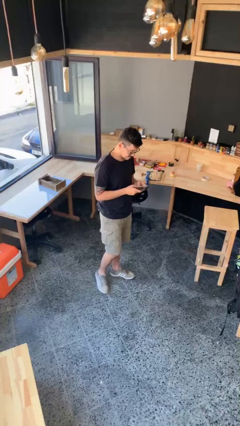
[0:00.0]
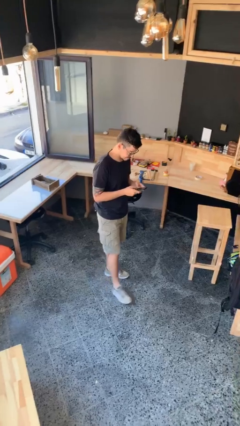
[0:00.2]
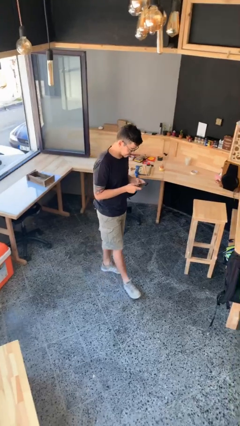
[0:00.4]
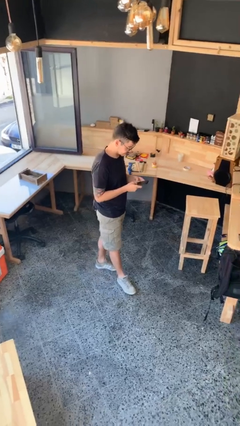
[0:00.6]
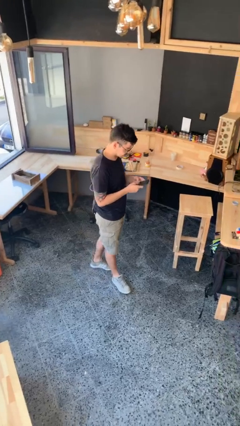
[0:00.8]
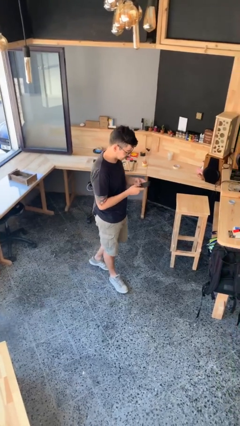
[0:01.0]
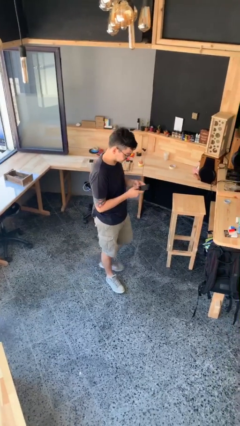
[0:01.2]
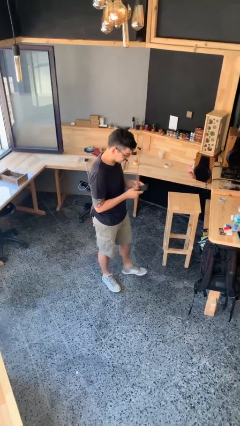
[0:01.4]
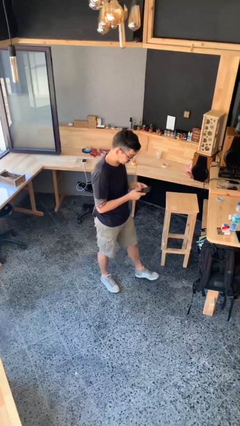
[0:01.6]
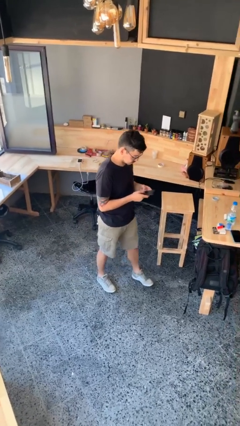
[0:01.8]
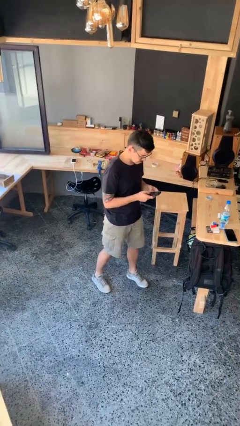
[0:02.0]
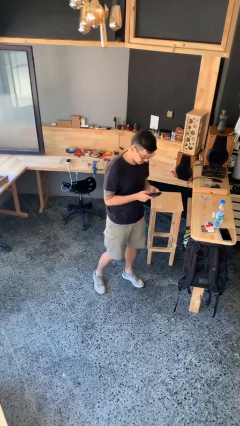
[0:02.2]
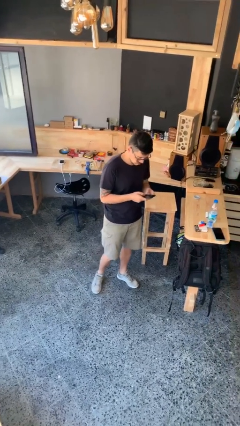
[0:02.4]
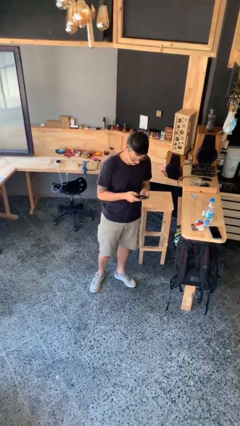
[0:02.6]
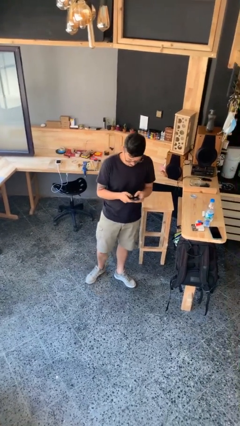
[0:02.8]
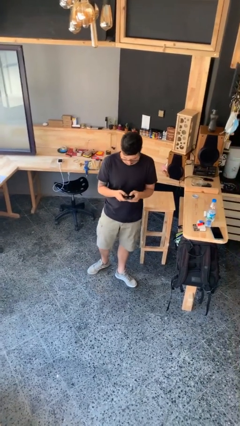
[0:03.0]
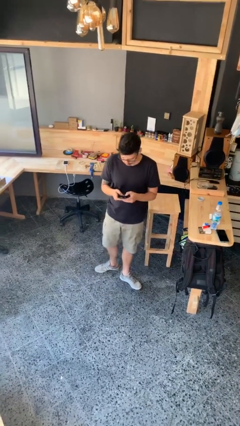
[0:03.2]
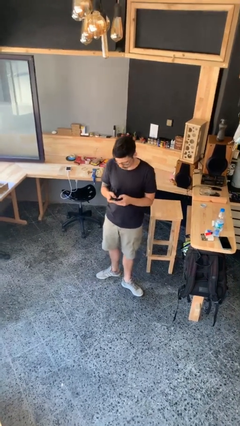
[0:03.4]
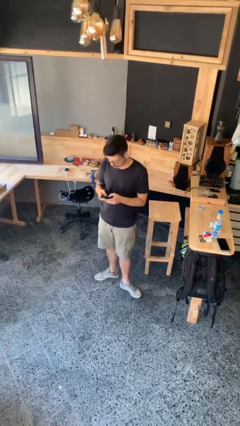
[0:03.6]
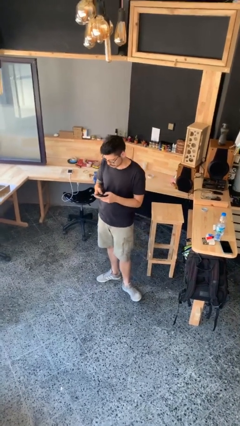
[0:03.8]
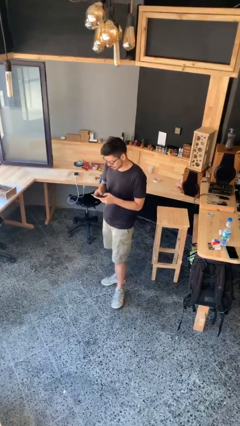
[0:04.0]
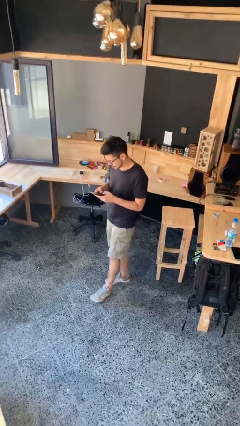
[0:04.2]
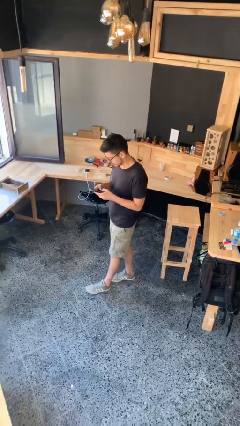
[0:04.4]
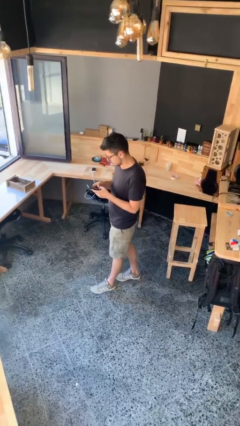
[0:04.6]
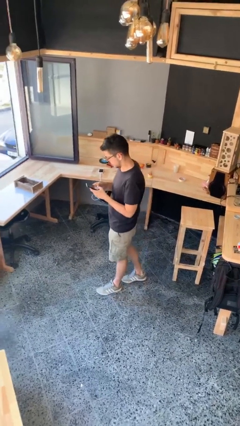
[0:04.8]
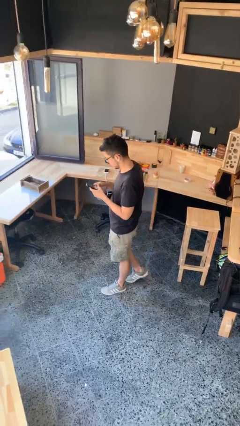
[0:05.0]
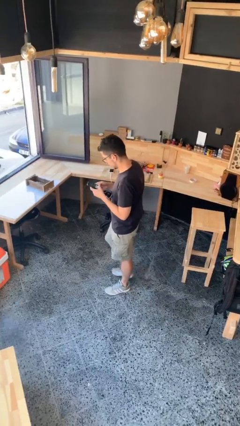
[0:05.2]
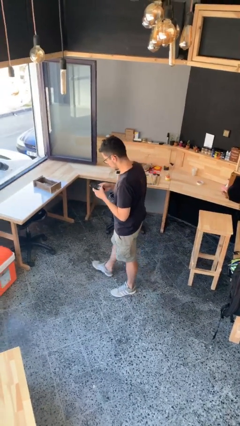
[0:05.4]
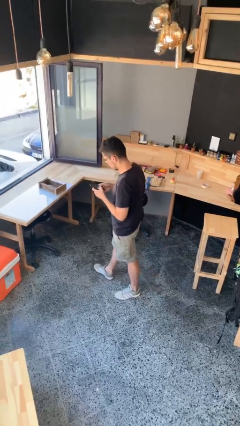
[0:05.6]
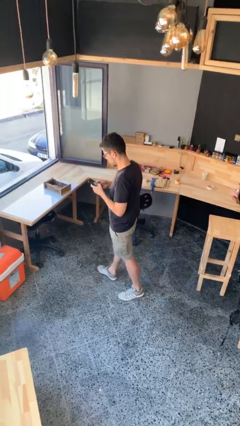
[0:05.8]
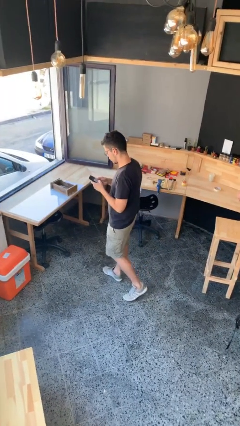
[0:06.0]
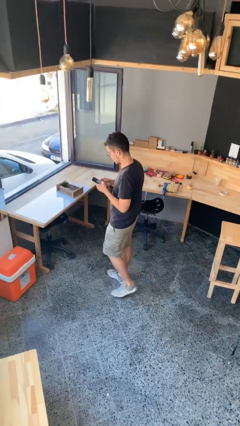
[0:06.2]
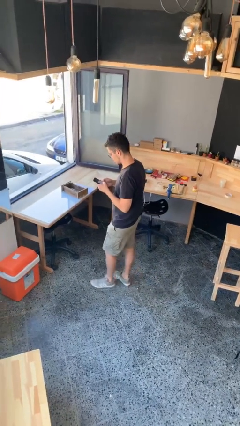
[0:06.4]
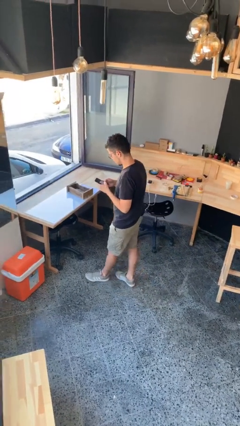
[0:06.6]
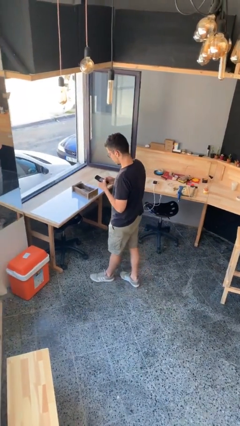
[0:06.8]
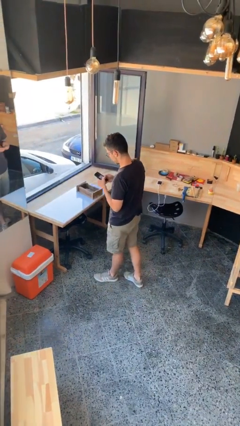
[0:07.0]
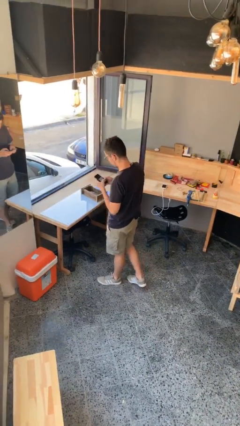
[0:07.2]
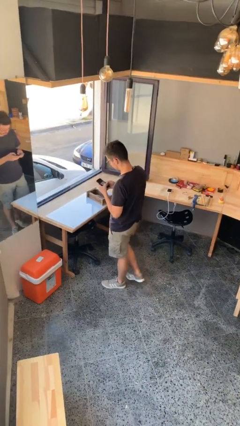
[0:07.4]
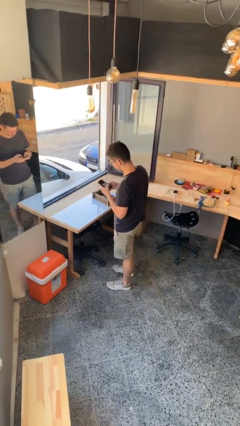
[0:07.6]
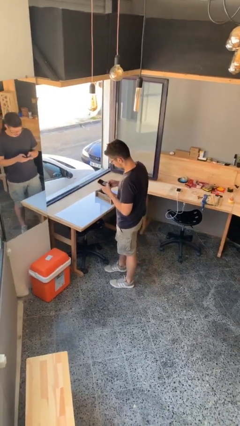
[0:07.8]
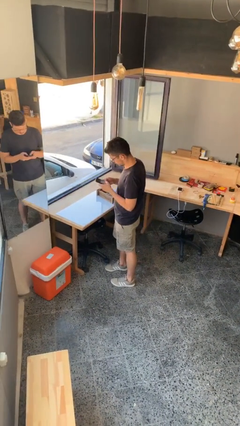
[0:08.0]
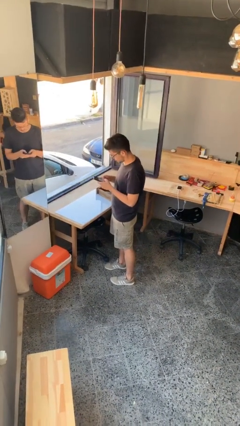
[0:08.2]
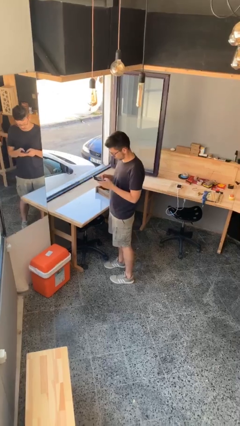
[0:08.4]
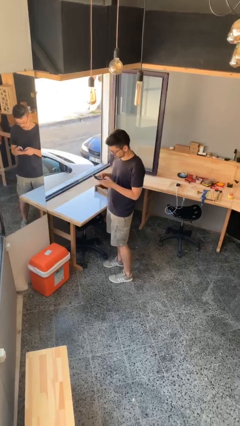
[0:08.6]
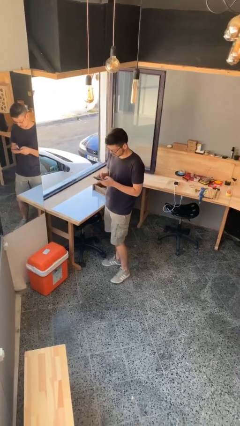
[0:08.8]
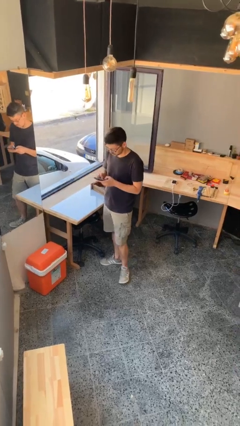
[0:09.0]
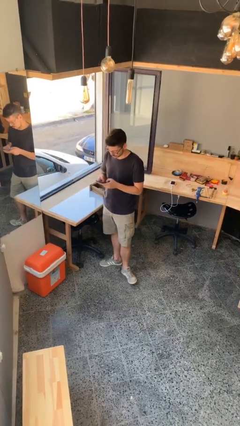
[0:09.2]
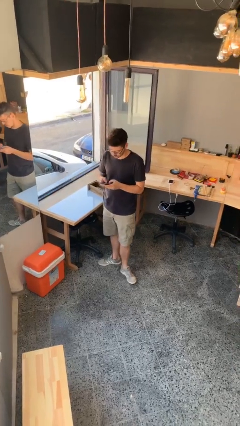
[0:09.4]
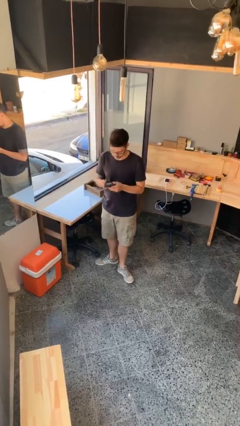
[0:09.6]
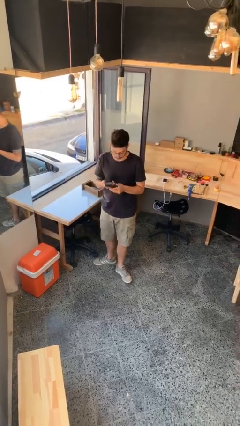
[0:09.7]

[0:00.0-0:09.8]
person texts on phone

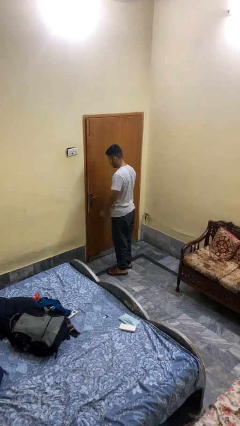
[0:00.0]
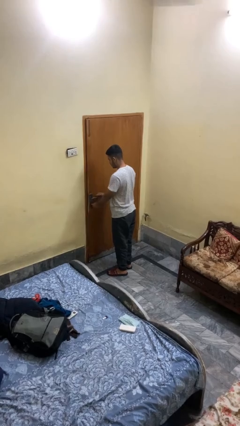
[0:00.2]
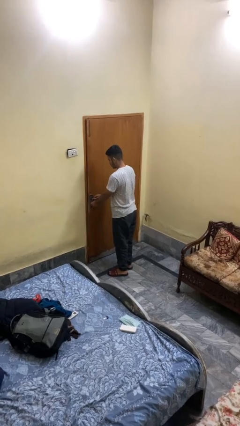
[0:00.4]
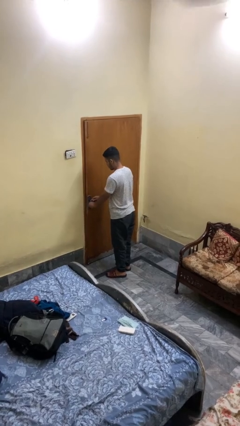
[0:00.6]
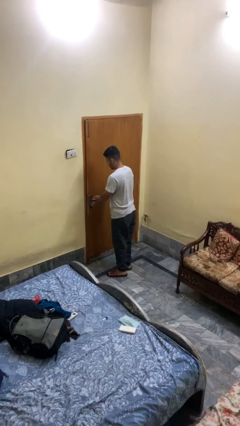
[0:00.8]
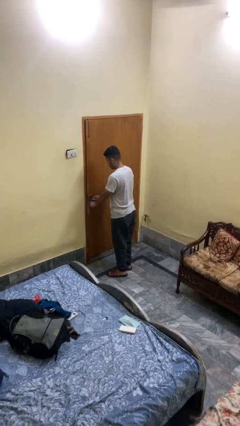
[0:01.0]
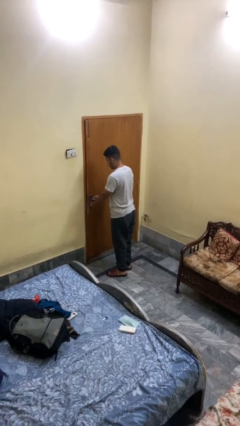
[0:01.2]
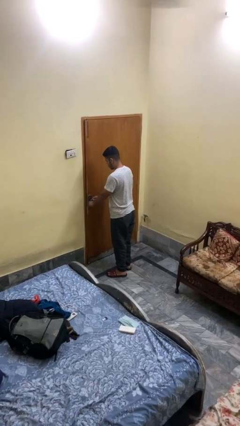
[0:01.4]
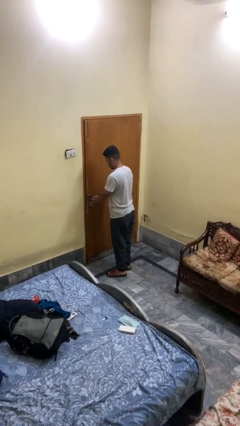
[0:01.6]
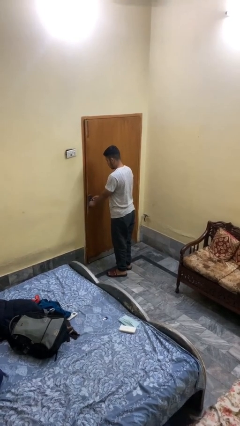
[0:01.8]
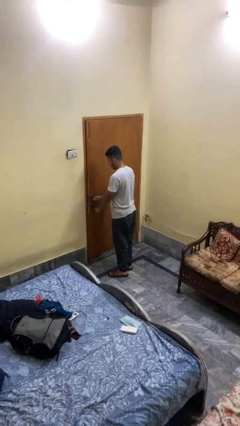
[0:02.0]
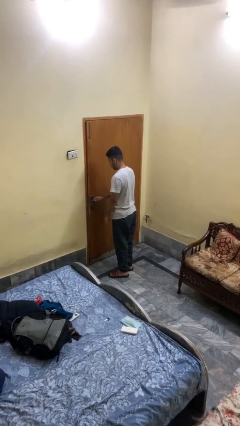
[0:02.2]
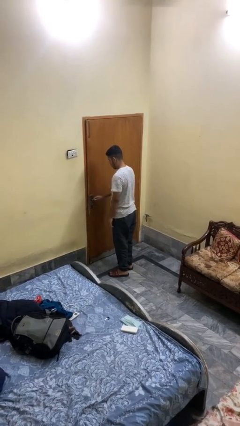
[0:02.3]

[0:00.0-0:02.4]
person unlocks door with keys

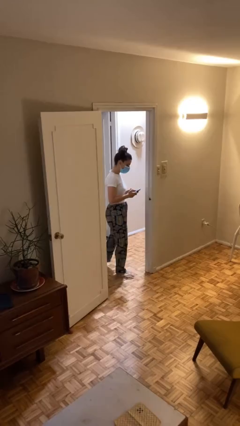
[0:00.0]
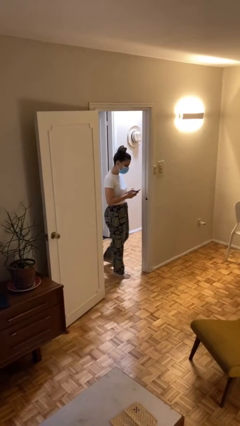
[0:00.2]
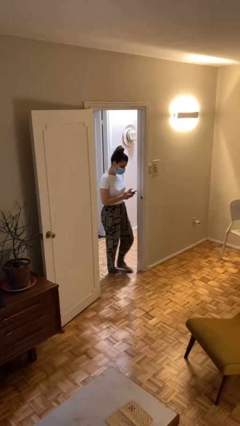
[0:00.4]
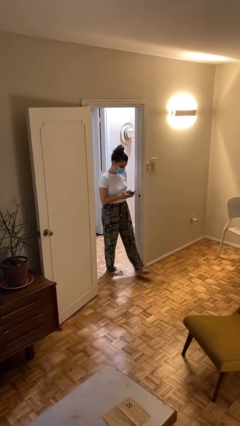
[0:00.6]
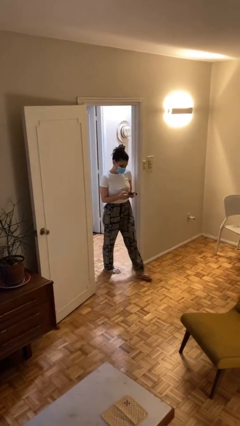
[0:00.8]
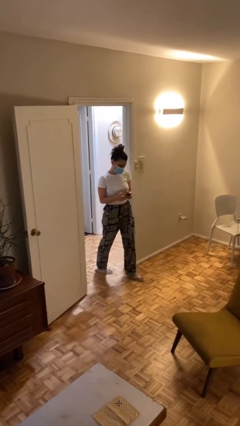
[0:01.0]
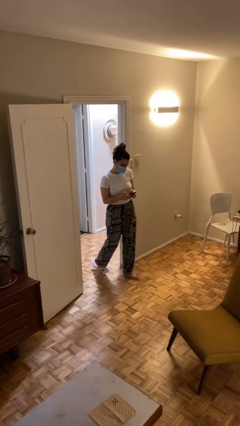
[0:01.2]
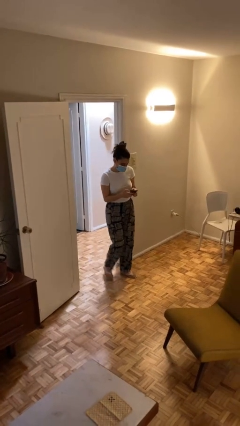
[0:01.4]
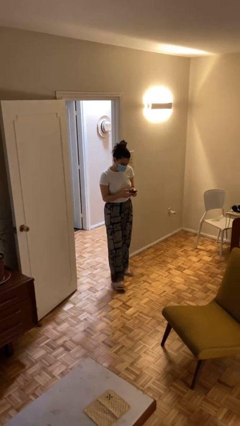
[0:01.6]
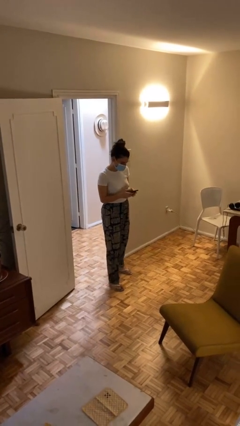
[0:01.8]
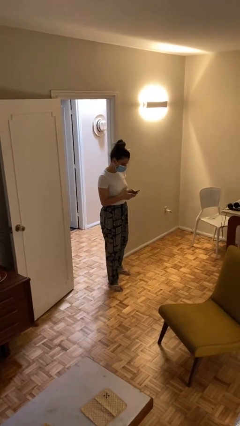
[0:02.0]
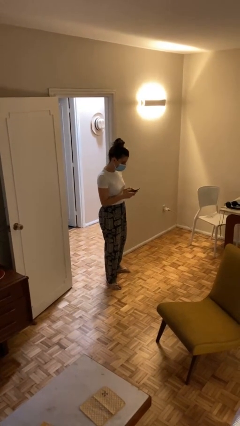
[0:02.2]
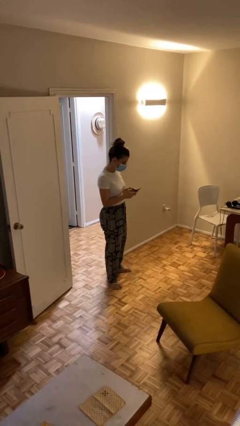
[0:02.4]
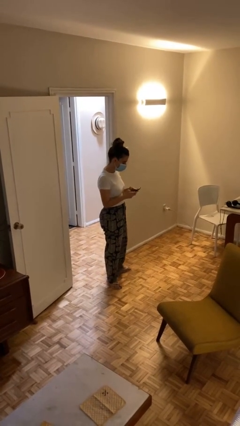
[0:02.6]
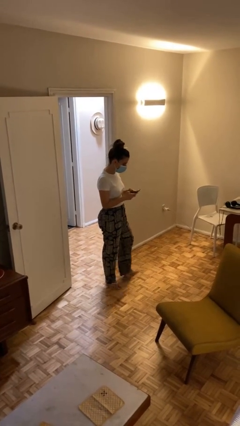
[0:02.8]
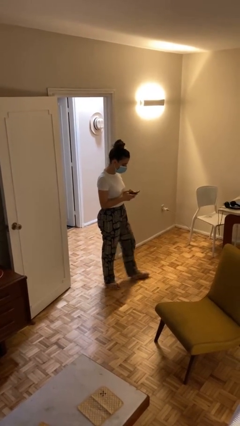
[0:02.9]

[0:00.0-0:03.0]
person enters scene through structure

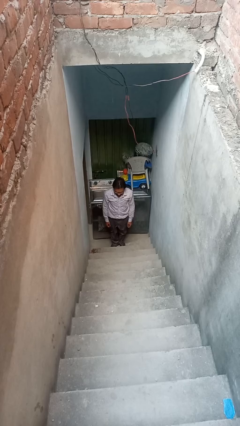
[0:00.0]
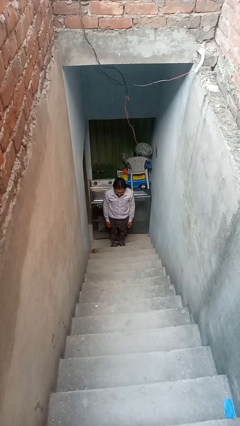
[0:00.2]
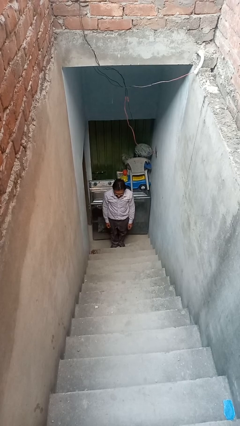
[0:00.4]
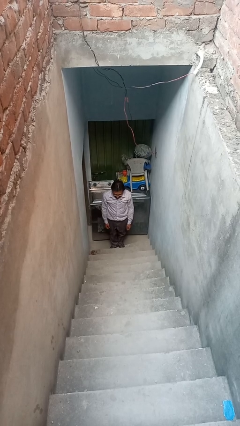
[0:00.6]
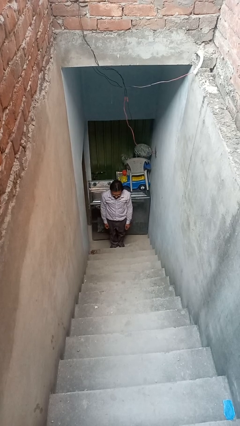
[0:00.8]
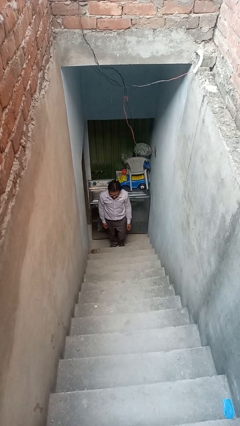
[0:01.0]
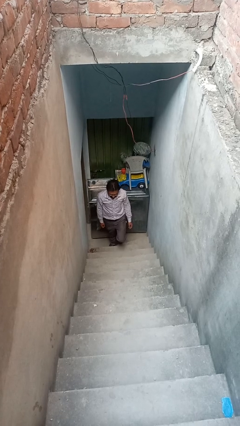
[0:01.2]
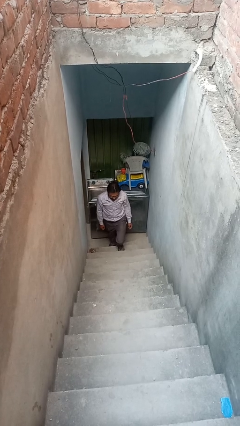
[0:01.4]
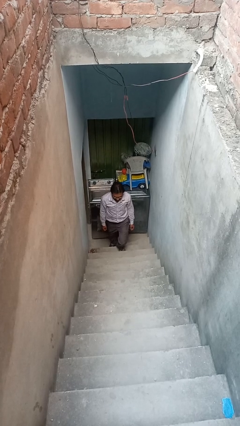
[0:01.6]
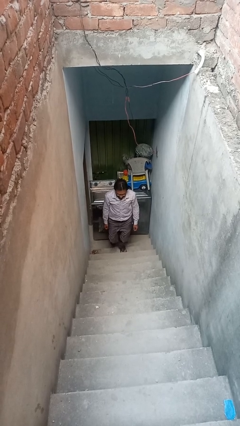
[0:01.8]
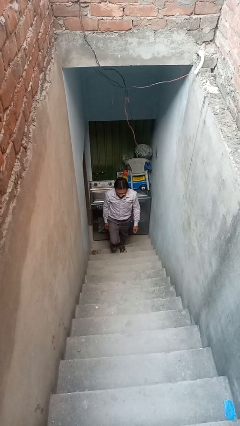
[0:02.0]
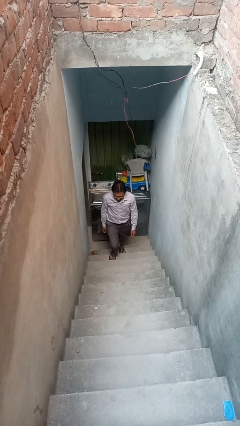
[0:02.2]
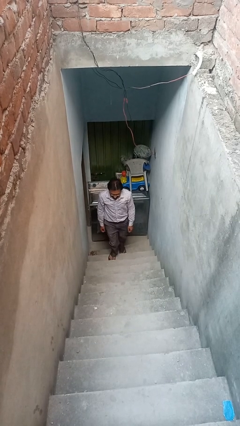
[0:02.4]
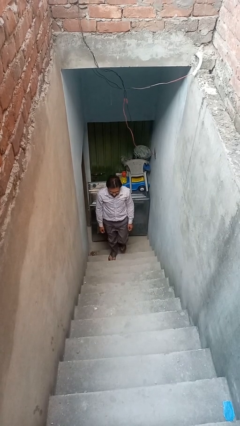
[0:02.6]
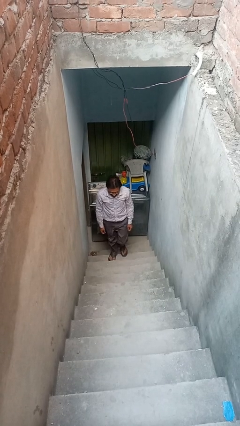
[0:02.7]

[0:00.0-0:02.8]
person climbs up stairs
